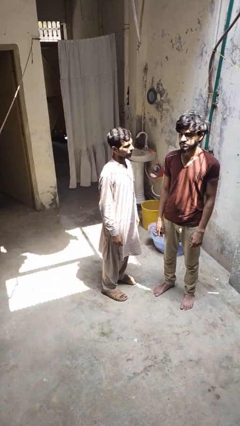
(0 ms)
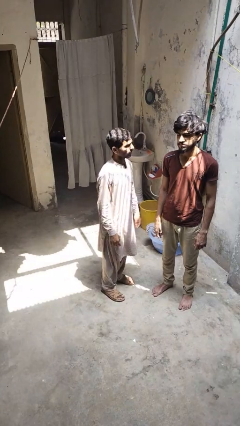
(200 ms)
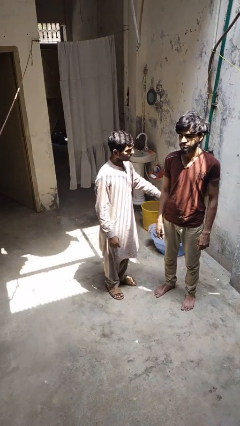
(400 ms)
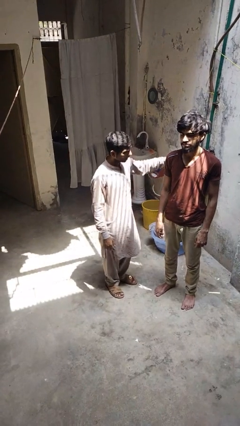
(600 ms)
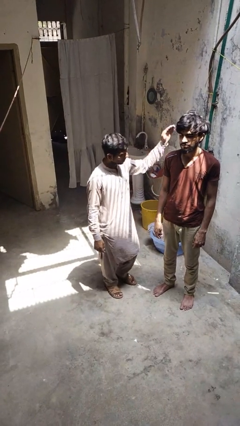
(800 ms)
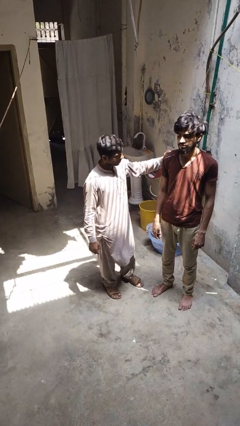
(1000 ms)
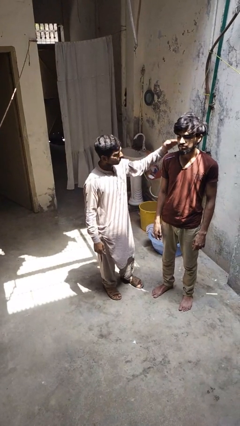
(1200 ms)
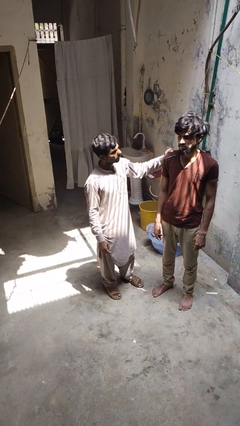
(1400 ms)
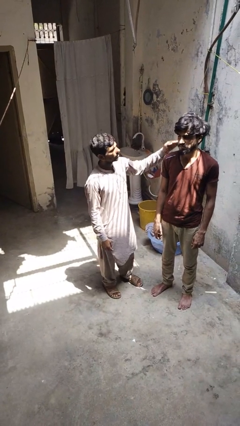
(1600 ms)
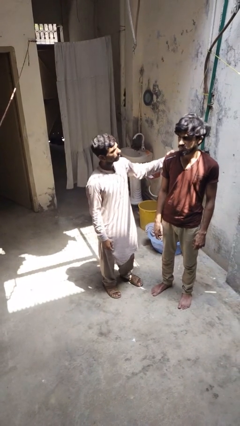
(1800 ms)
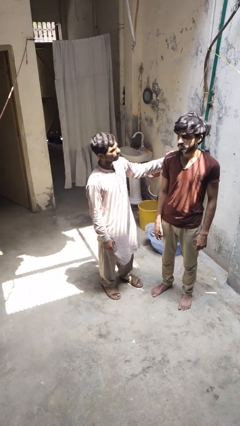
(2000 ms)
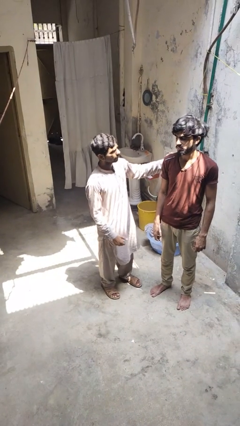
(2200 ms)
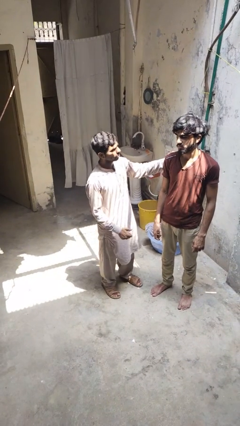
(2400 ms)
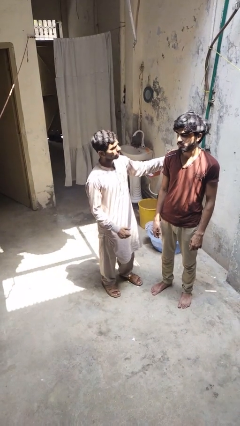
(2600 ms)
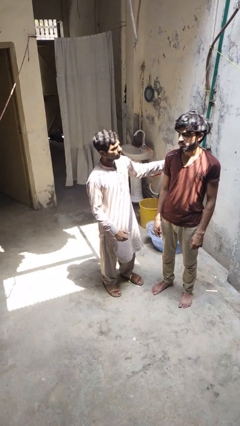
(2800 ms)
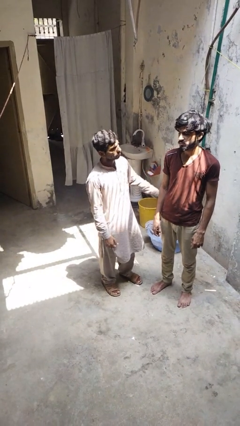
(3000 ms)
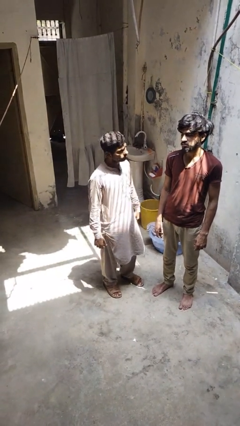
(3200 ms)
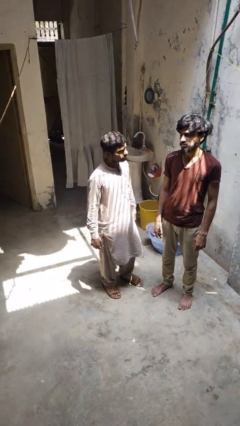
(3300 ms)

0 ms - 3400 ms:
person pounds shoulders of person

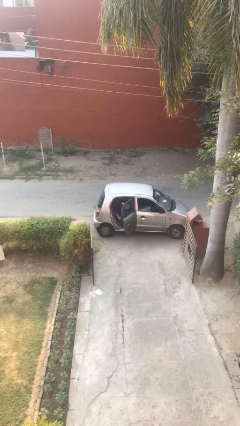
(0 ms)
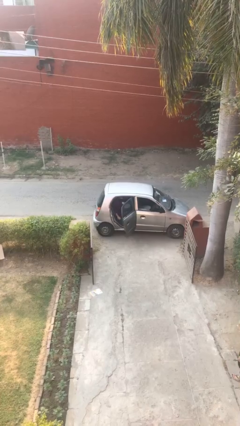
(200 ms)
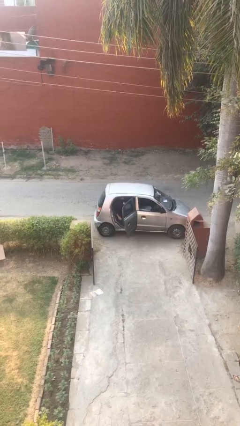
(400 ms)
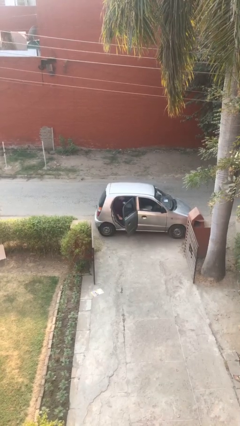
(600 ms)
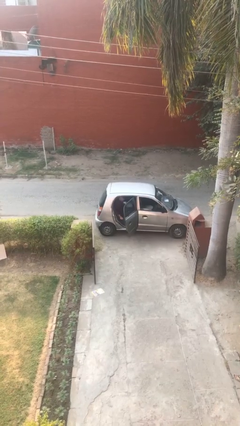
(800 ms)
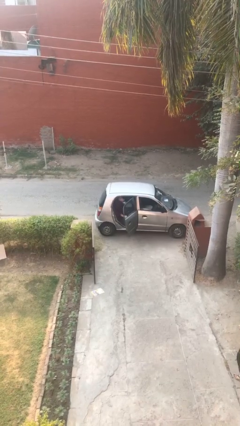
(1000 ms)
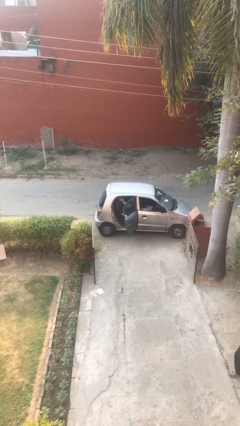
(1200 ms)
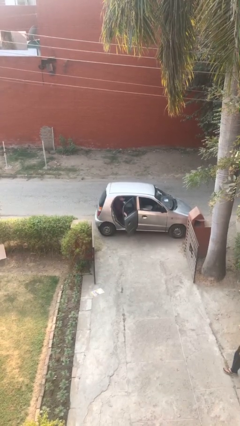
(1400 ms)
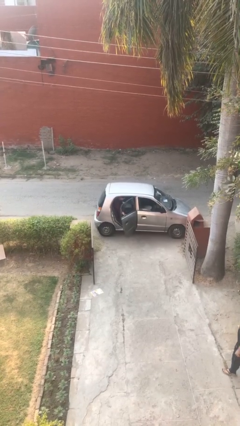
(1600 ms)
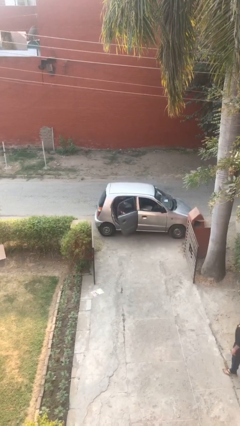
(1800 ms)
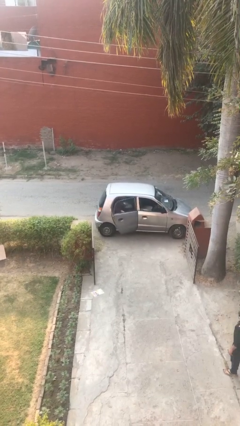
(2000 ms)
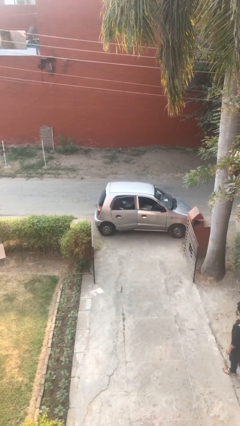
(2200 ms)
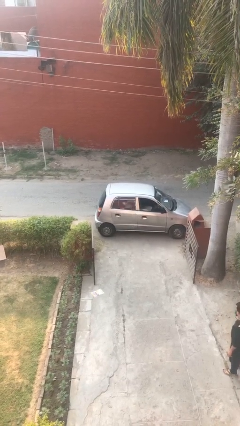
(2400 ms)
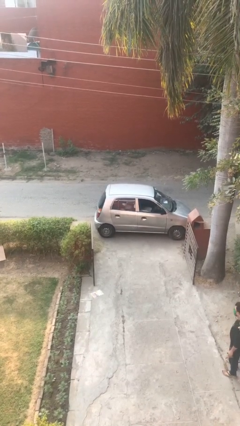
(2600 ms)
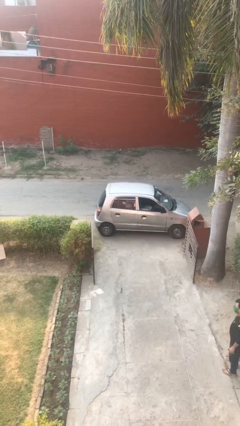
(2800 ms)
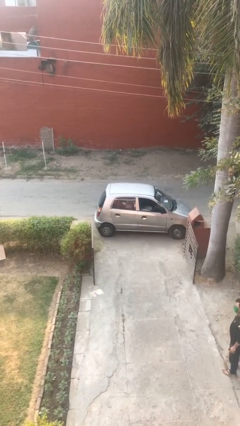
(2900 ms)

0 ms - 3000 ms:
person closes car door

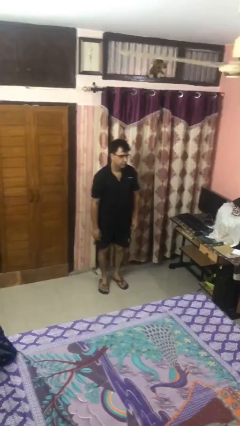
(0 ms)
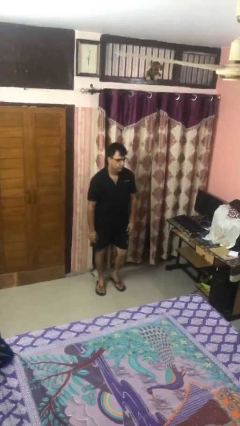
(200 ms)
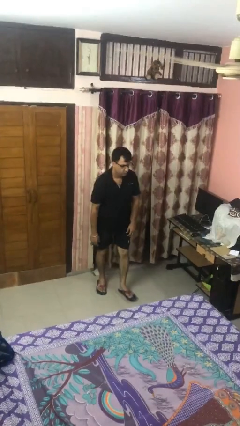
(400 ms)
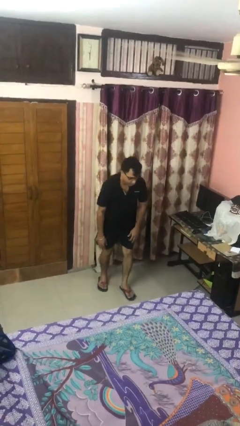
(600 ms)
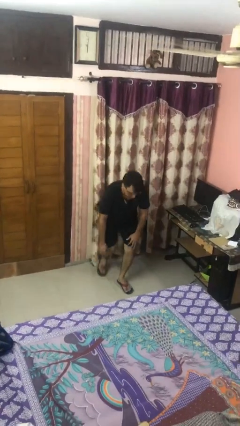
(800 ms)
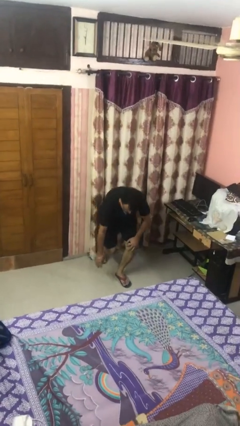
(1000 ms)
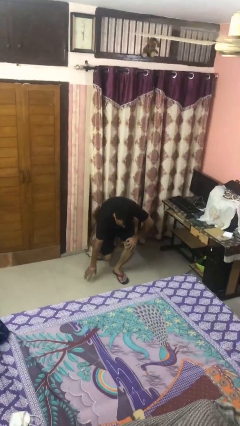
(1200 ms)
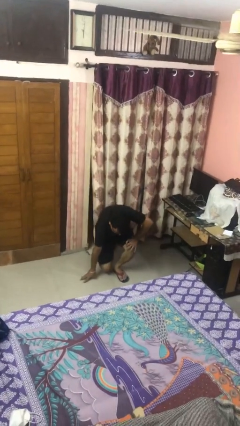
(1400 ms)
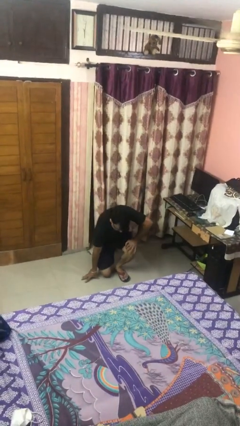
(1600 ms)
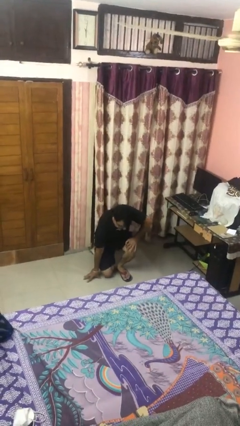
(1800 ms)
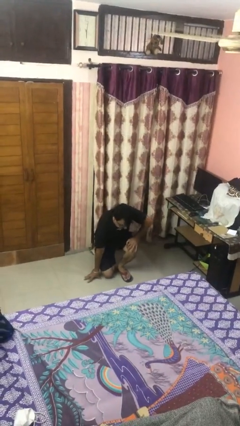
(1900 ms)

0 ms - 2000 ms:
person kneels

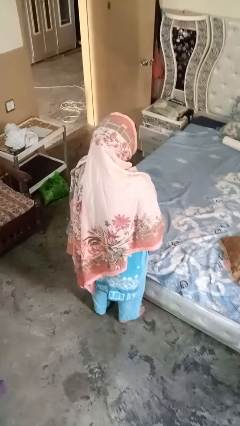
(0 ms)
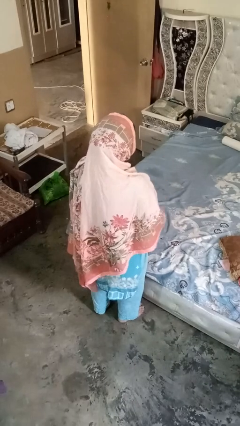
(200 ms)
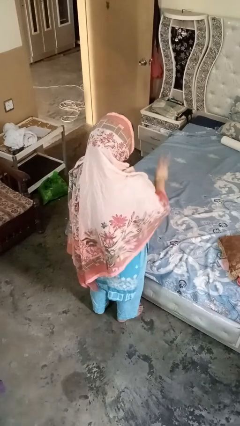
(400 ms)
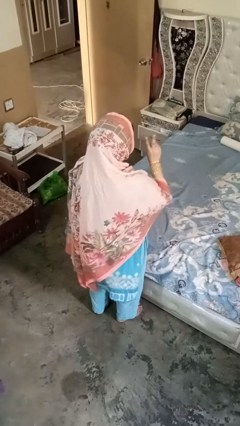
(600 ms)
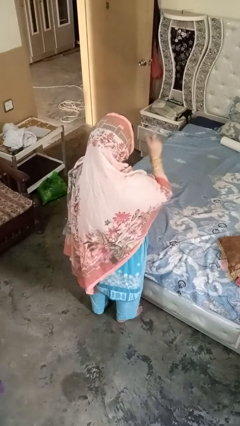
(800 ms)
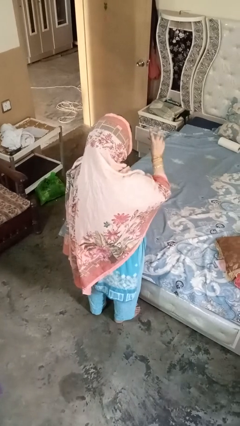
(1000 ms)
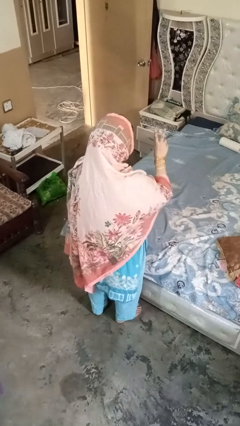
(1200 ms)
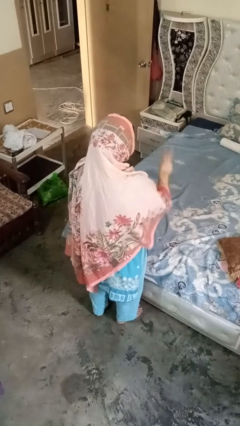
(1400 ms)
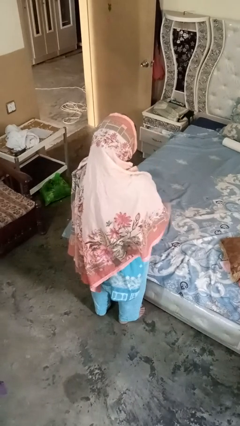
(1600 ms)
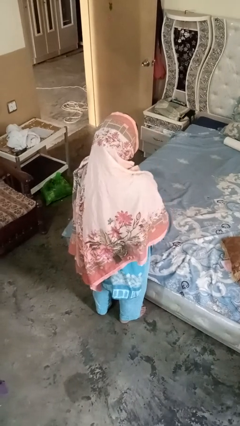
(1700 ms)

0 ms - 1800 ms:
person gestures be quiet

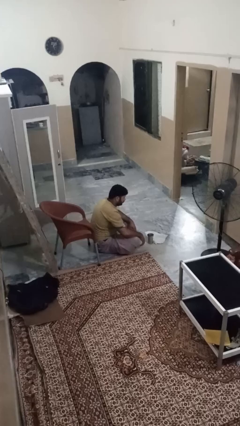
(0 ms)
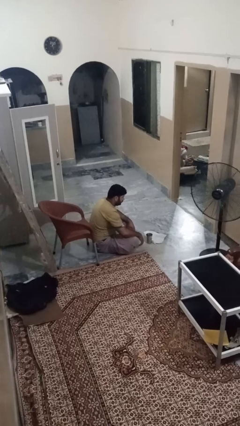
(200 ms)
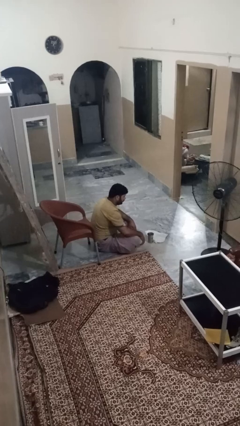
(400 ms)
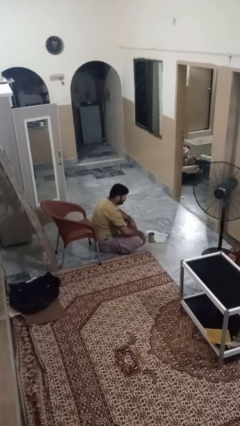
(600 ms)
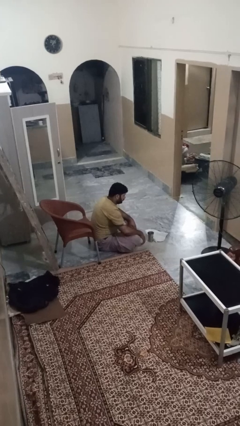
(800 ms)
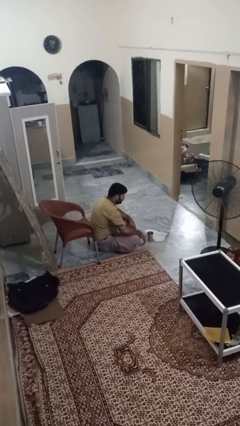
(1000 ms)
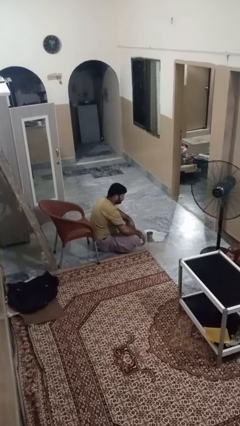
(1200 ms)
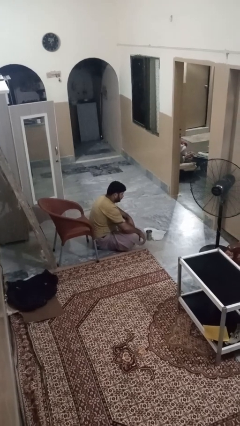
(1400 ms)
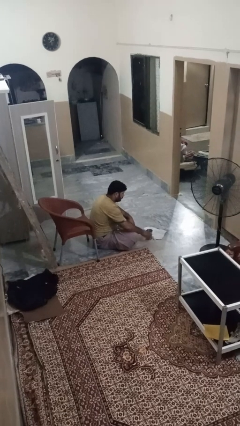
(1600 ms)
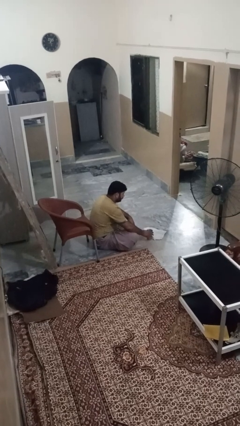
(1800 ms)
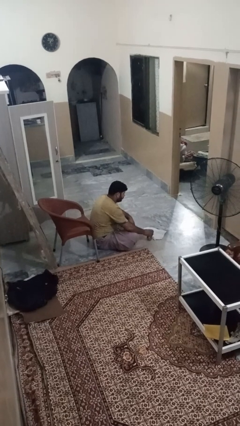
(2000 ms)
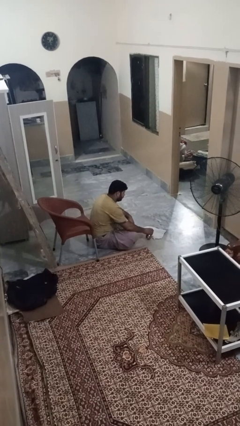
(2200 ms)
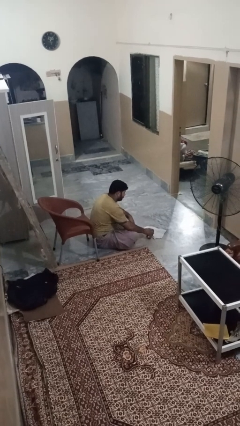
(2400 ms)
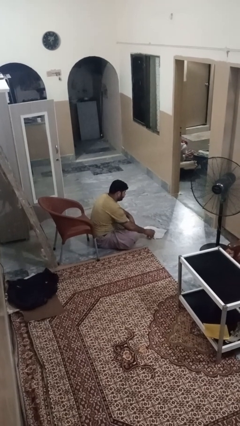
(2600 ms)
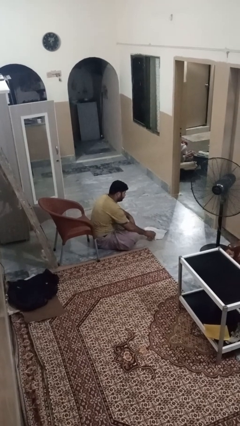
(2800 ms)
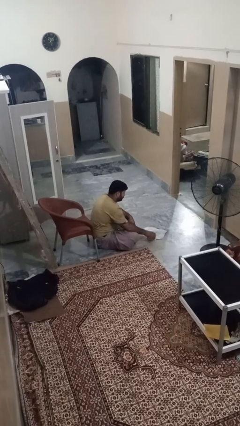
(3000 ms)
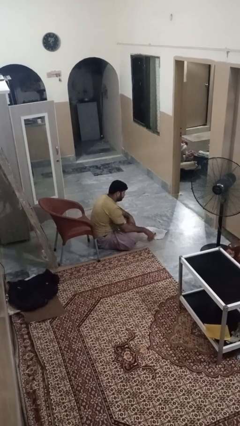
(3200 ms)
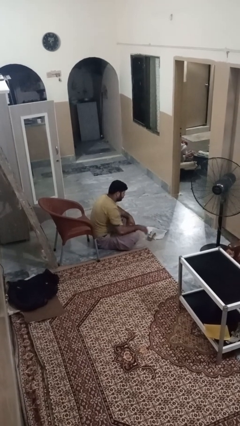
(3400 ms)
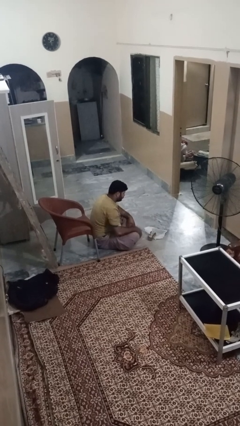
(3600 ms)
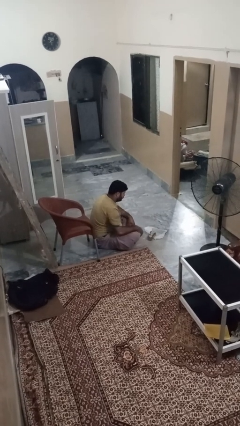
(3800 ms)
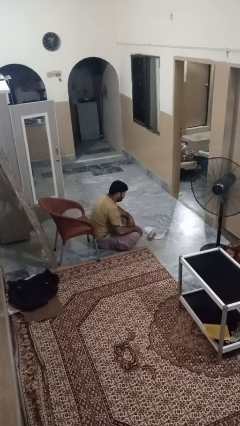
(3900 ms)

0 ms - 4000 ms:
person spills on floor

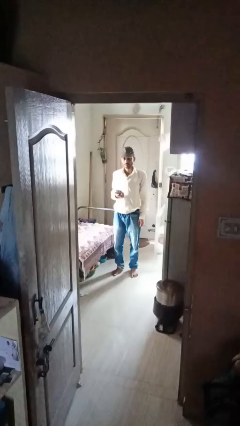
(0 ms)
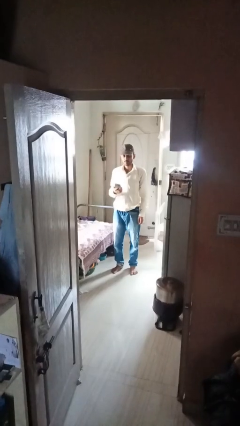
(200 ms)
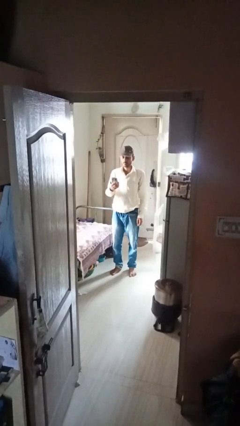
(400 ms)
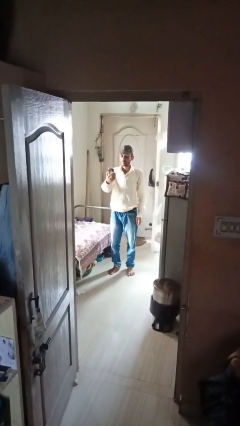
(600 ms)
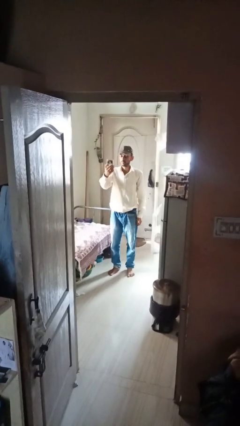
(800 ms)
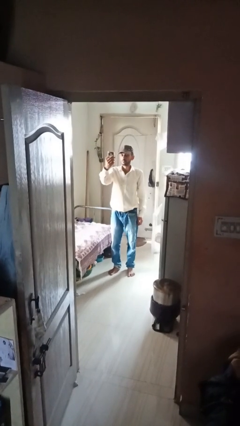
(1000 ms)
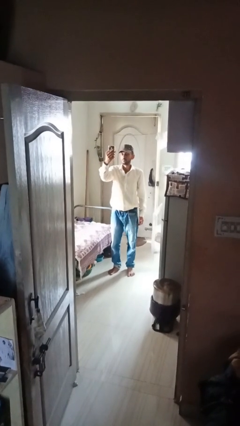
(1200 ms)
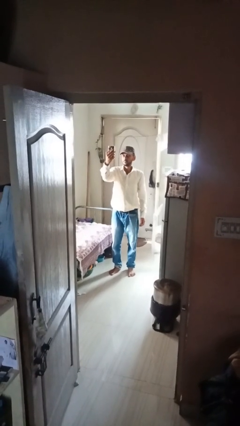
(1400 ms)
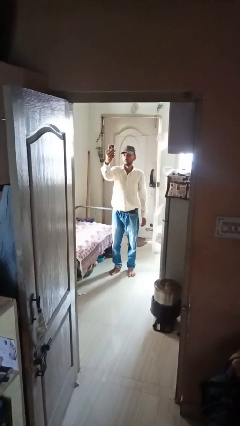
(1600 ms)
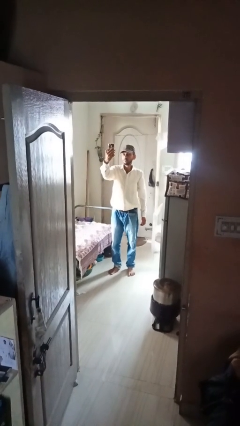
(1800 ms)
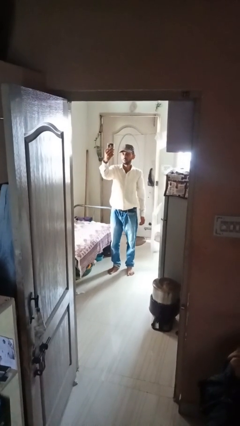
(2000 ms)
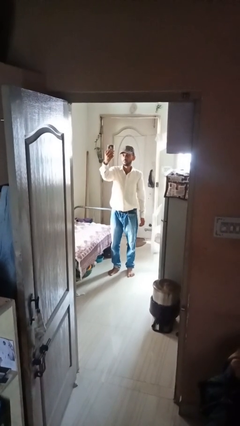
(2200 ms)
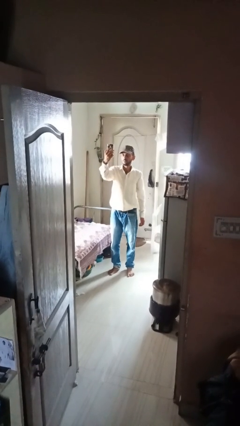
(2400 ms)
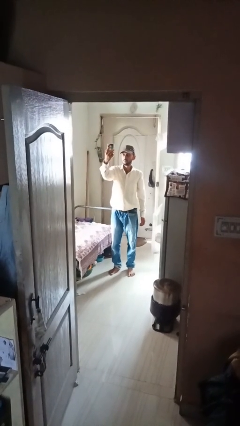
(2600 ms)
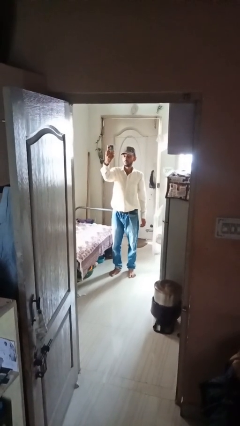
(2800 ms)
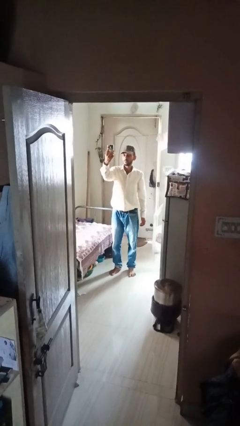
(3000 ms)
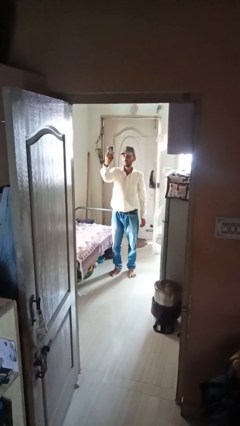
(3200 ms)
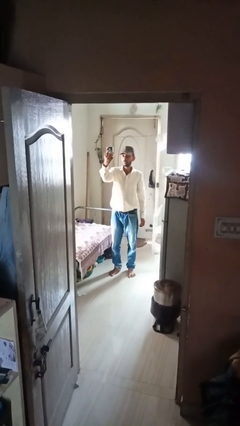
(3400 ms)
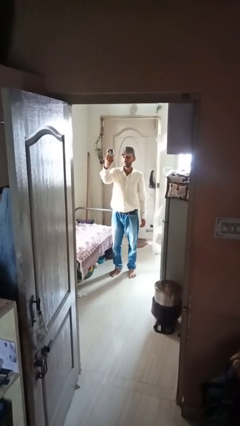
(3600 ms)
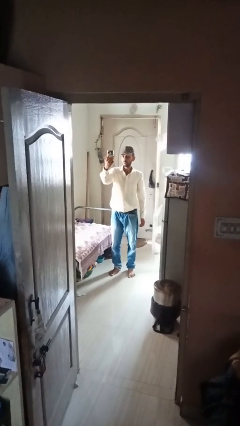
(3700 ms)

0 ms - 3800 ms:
person takes selfie
